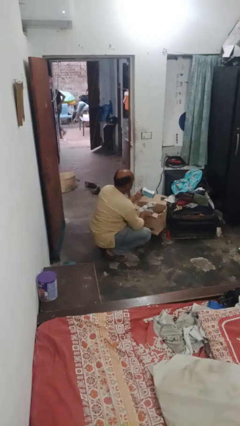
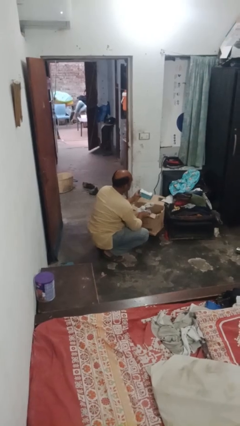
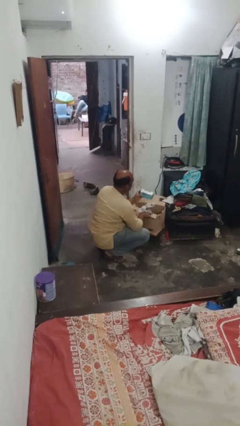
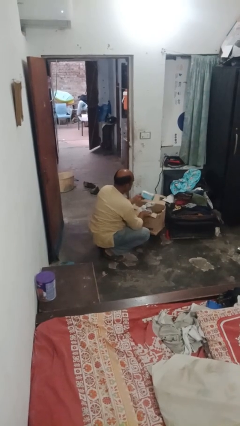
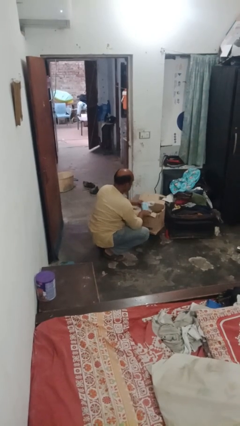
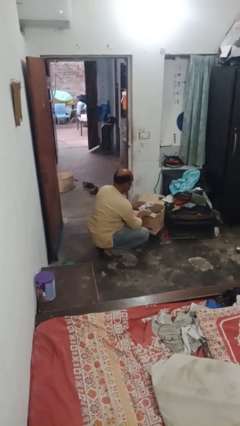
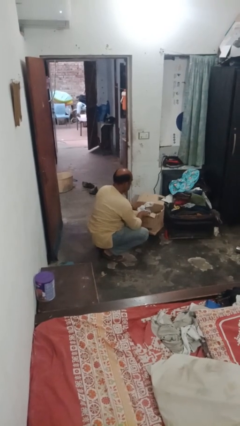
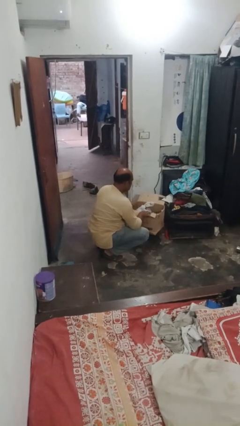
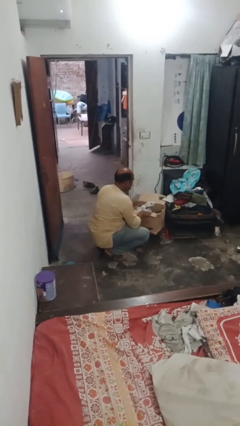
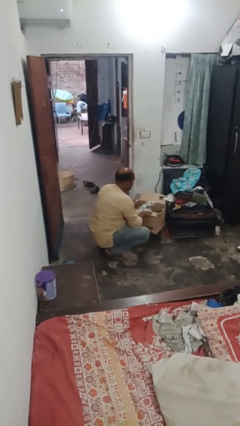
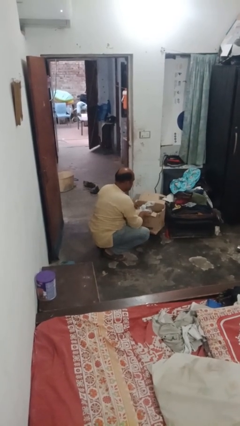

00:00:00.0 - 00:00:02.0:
person puts object into box

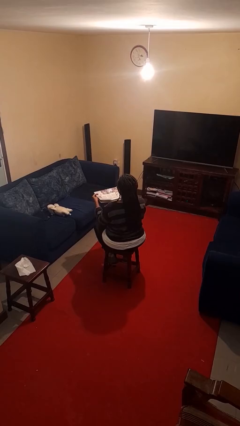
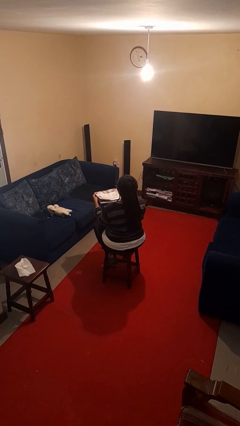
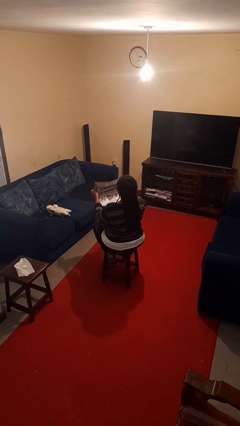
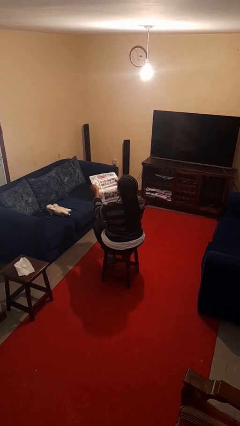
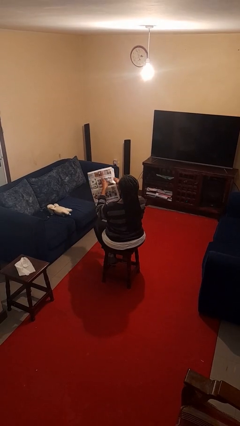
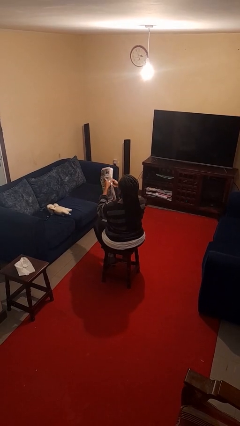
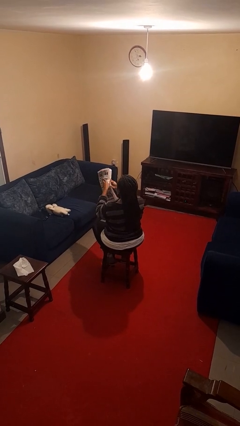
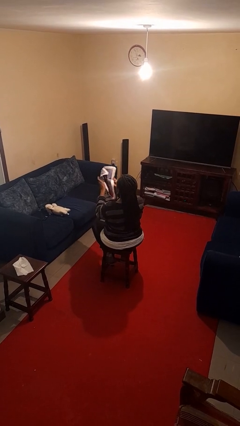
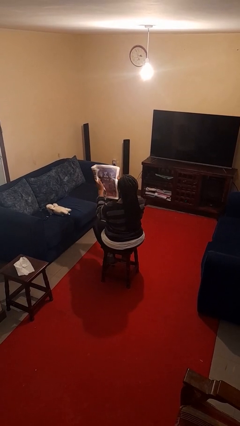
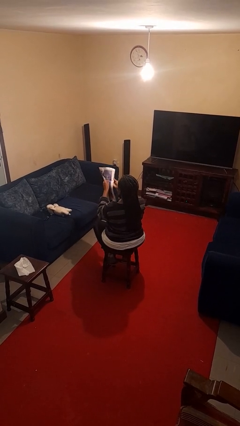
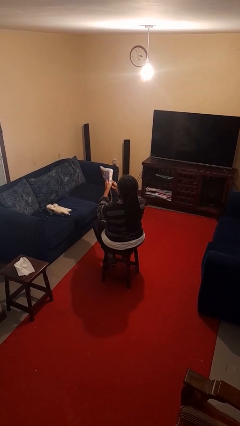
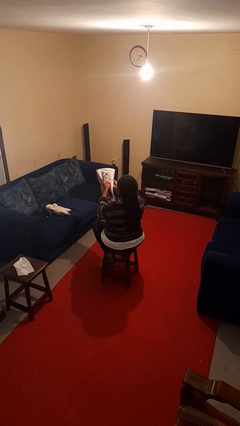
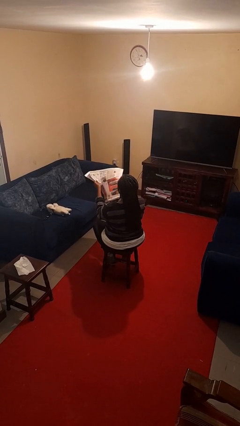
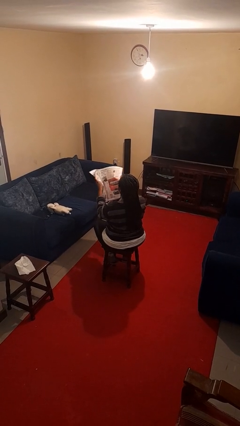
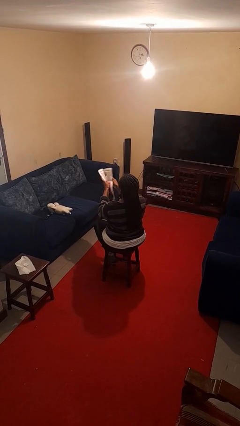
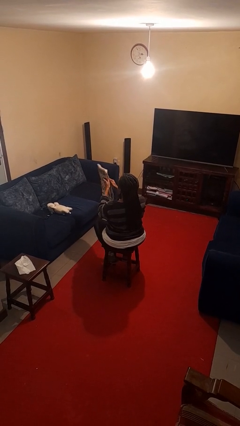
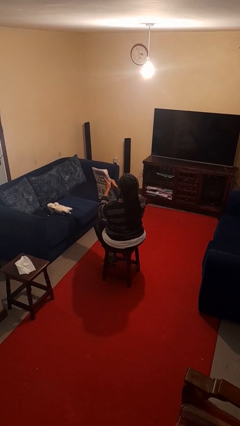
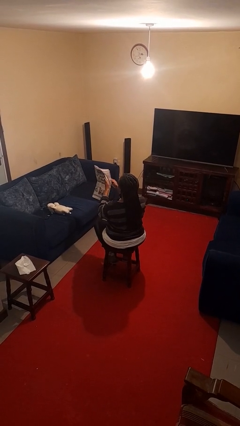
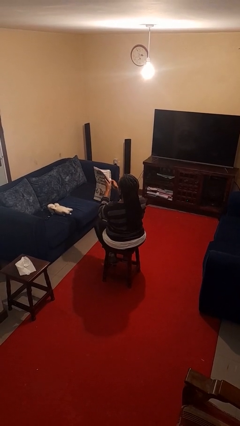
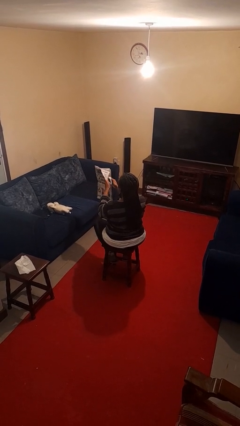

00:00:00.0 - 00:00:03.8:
person reads newspaper

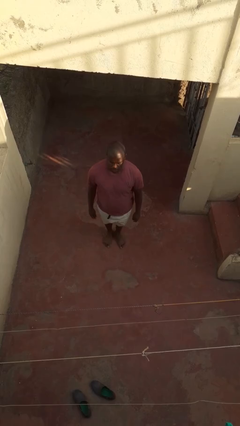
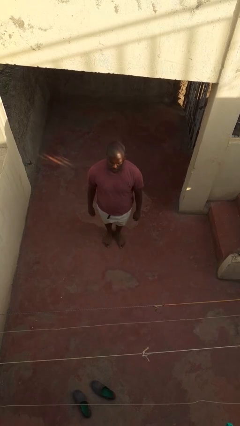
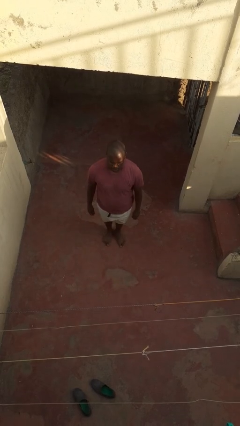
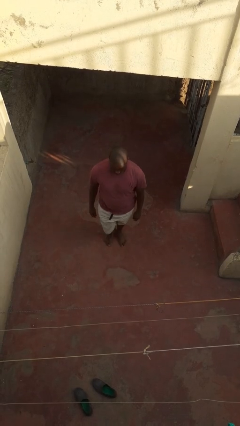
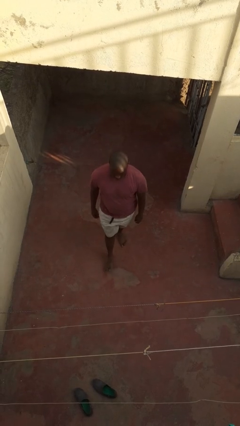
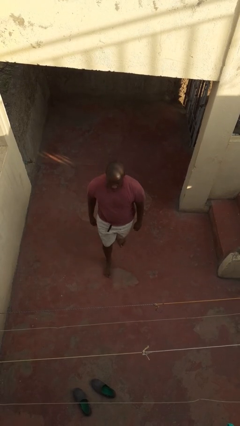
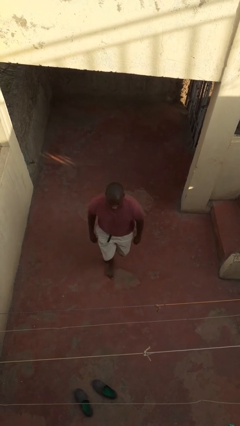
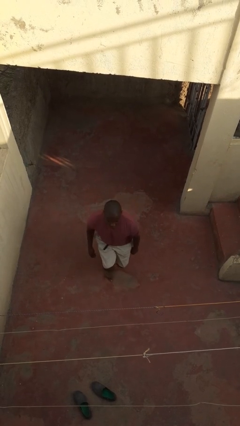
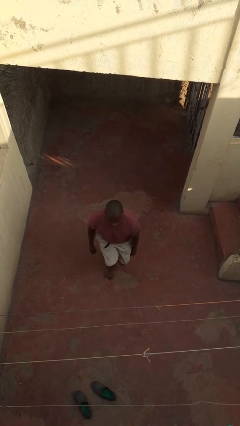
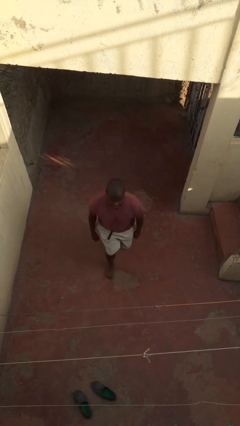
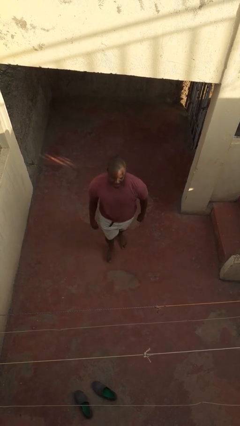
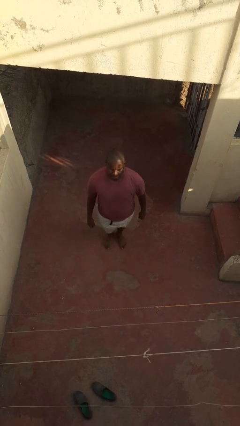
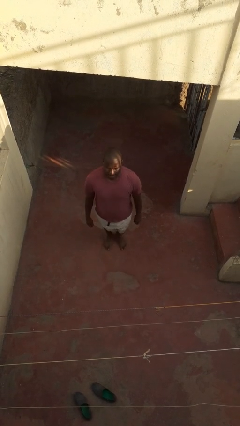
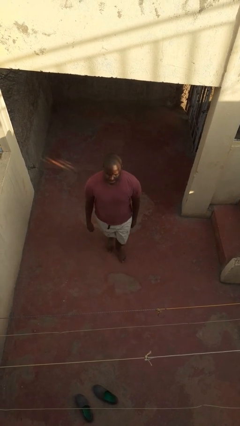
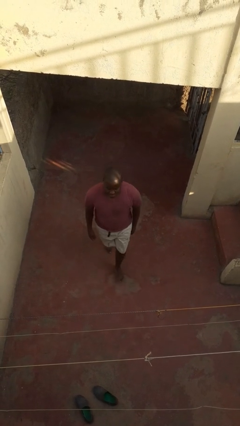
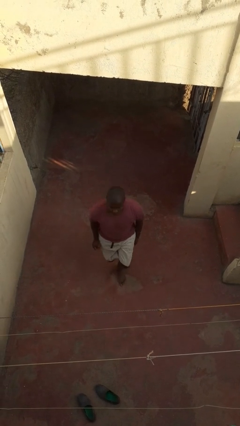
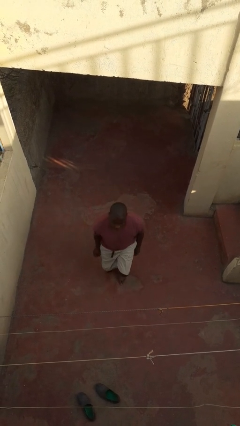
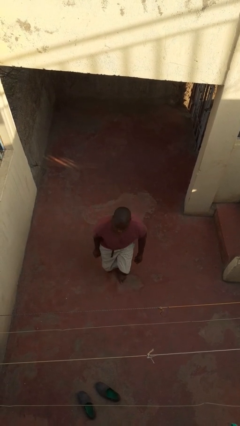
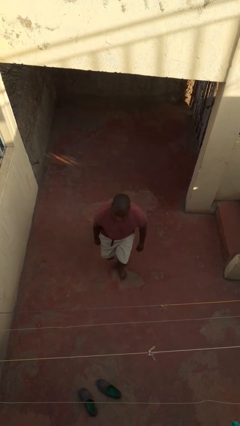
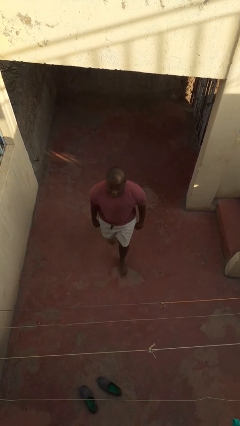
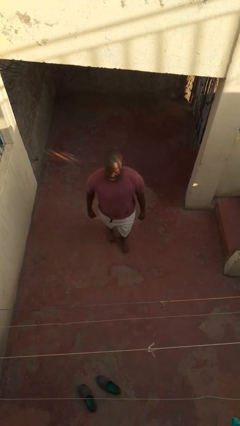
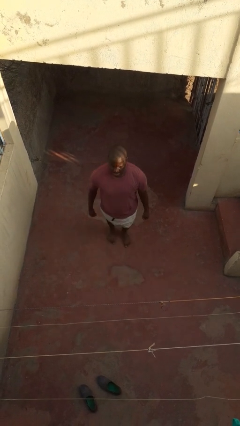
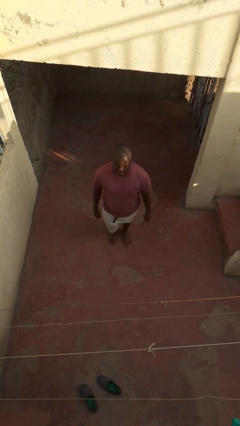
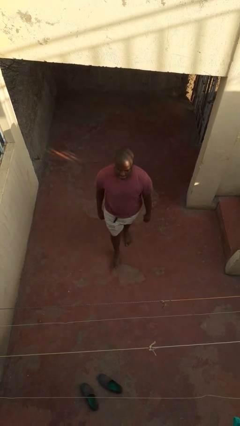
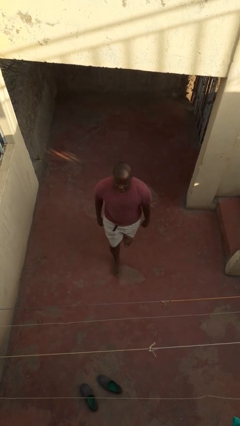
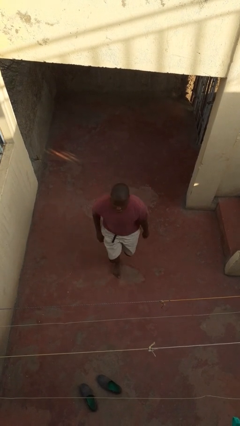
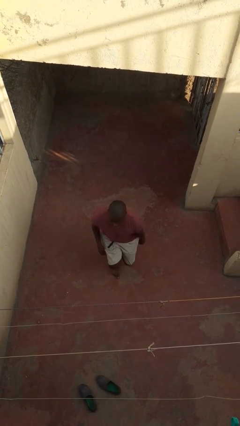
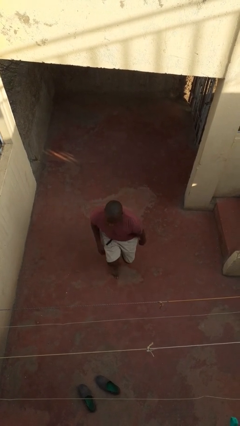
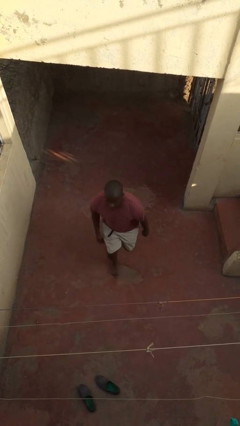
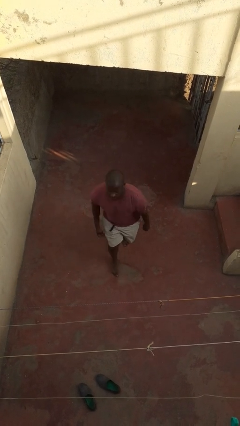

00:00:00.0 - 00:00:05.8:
person exercises with lunges

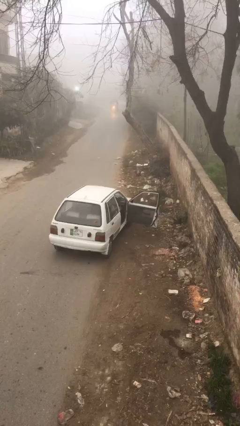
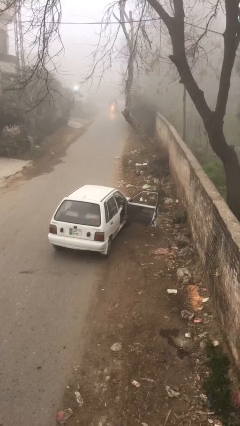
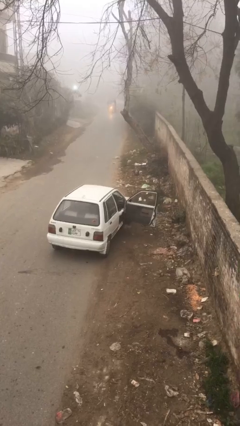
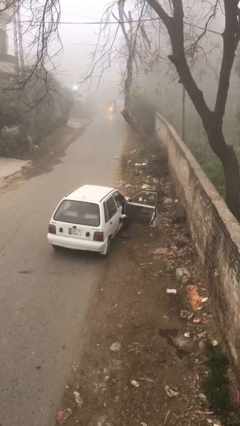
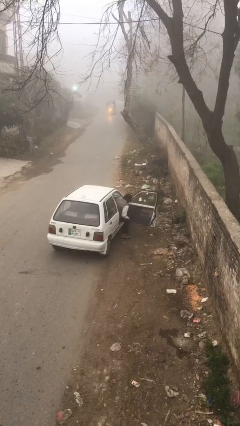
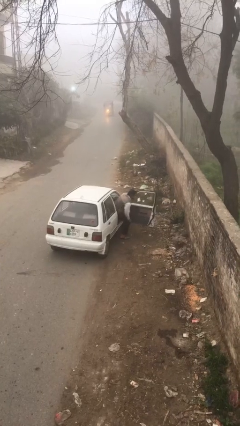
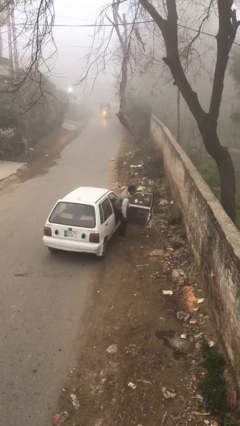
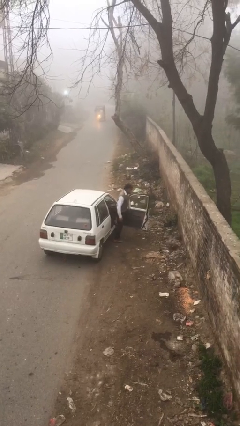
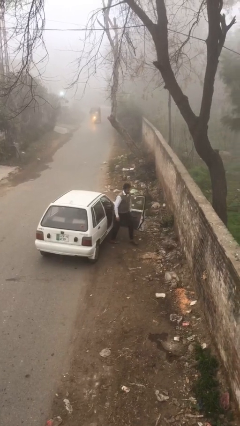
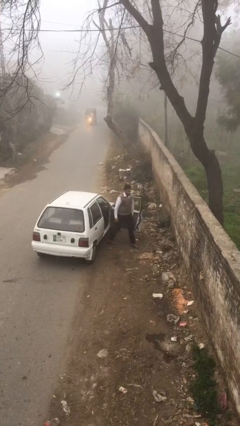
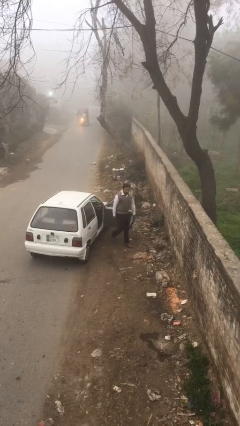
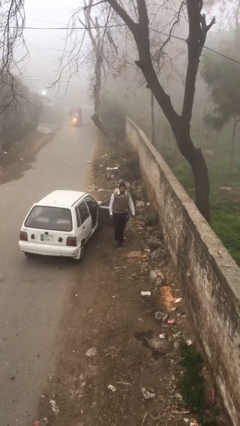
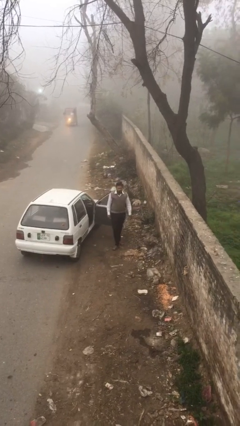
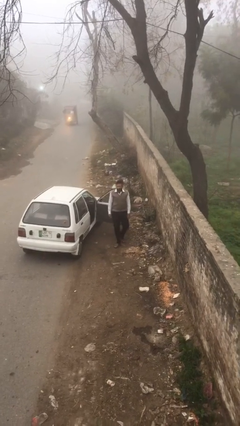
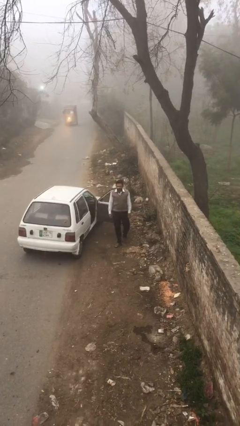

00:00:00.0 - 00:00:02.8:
person exits car

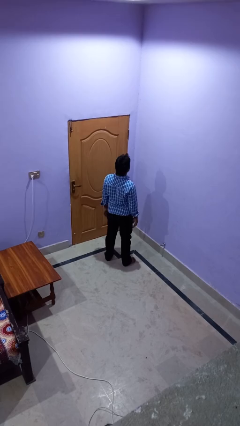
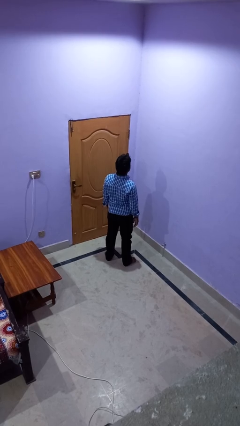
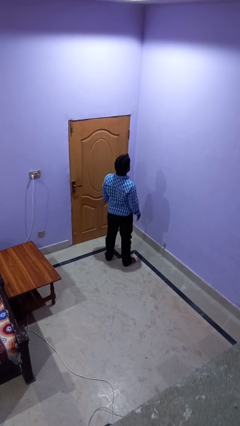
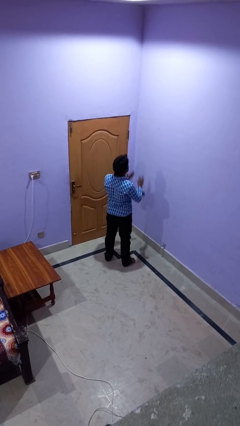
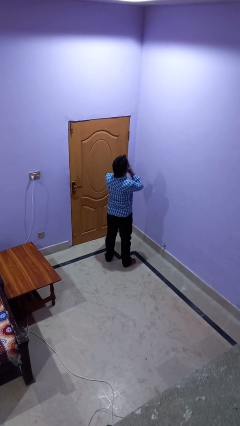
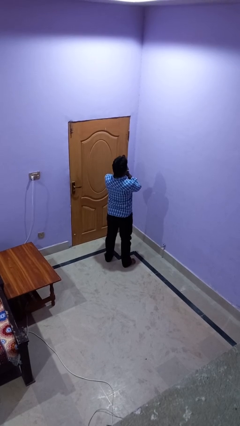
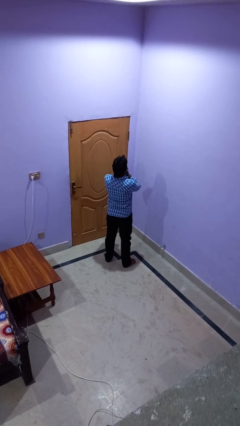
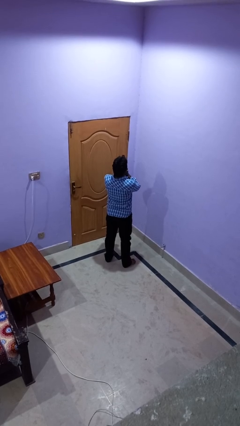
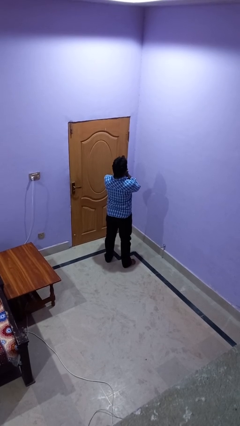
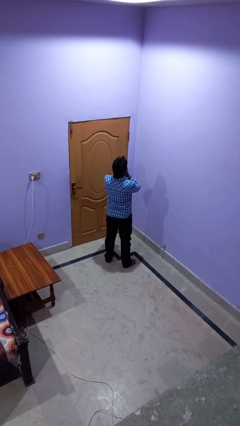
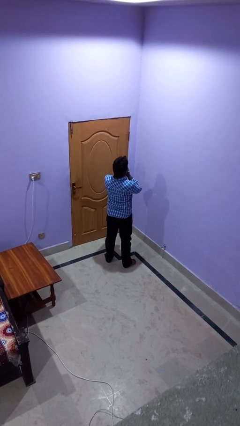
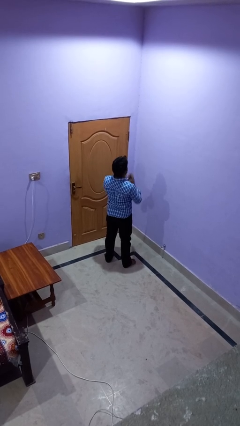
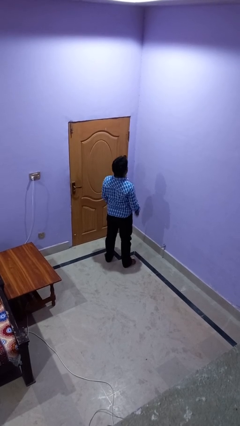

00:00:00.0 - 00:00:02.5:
person sneezes into hand

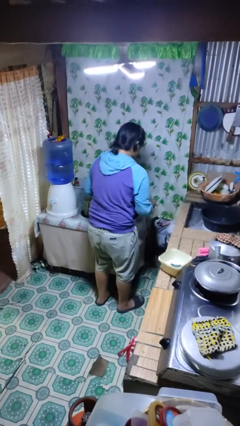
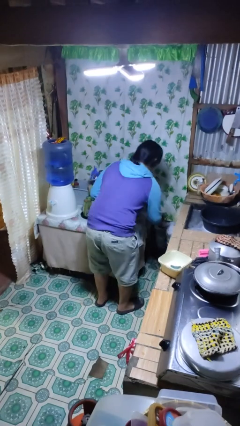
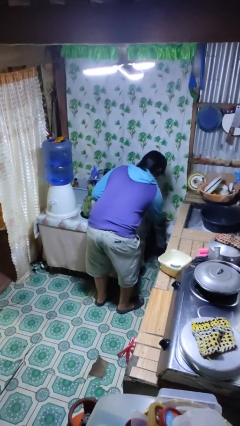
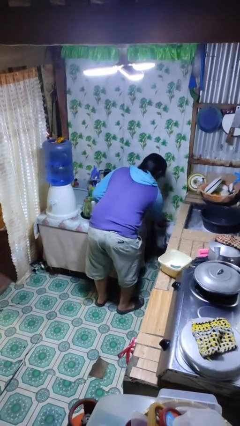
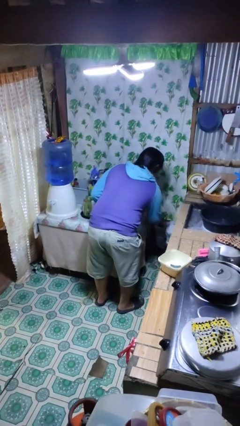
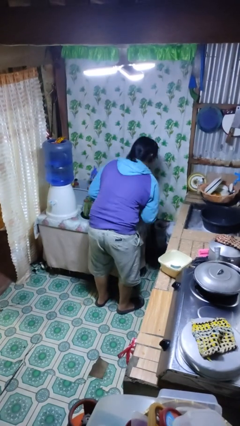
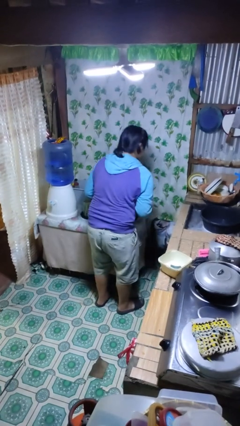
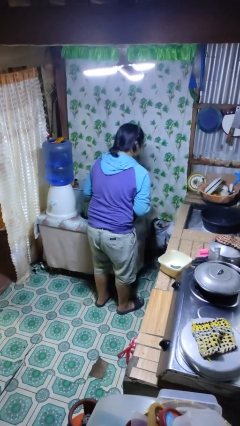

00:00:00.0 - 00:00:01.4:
person discards trash
